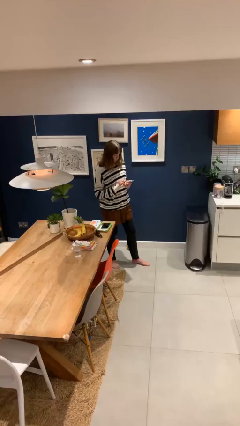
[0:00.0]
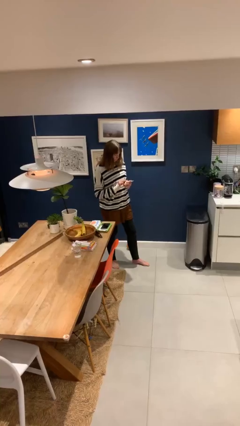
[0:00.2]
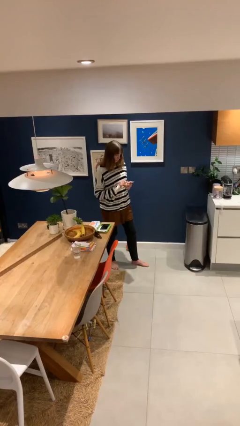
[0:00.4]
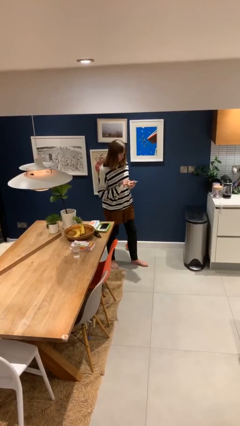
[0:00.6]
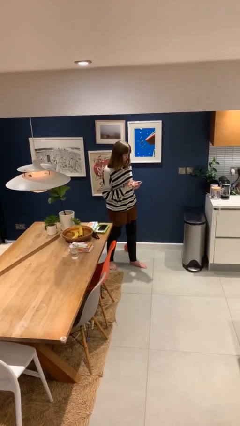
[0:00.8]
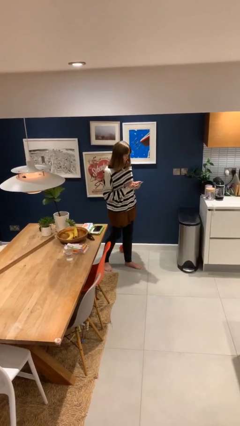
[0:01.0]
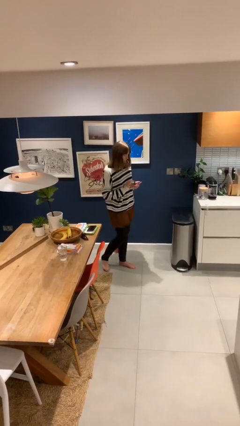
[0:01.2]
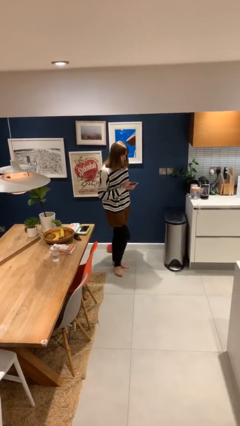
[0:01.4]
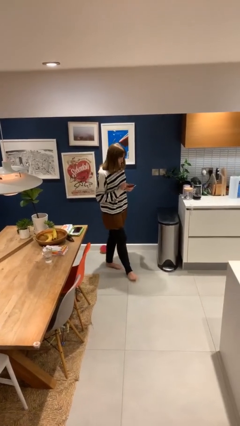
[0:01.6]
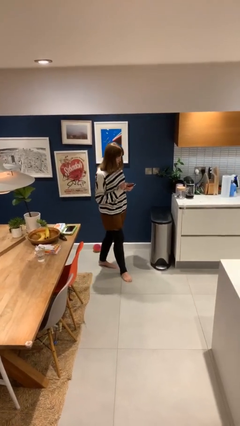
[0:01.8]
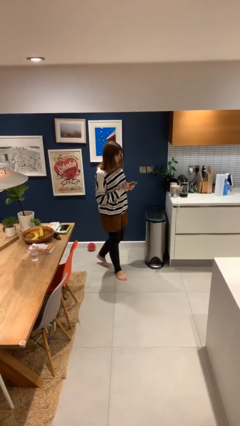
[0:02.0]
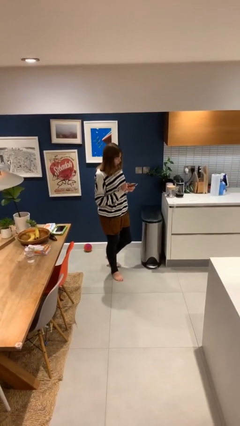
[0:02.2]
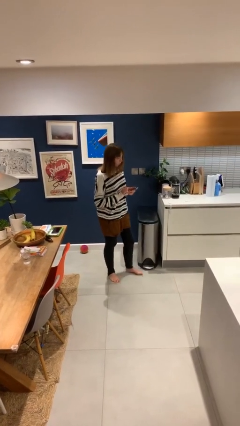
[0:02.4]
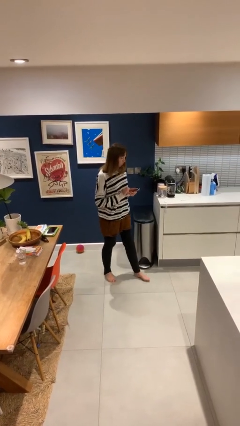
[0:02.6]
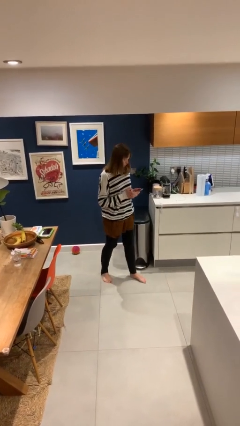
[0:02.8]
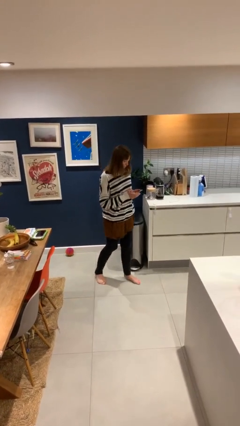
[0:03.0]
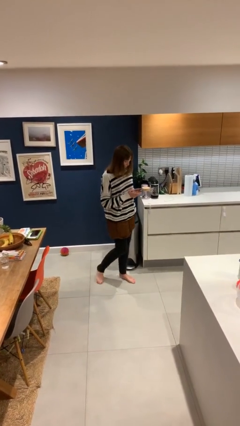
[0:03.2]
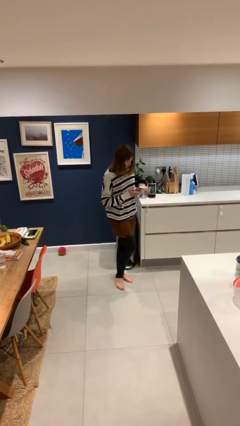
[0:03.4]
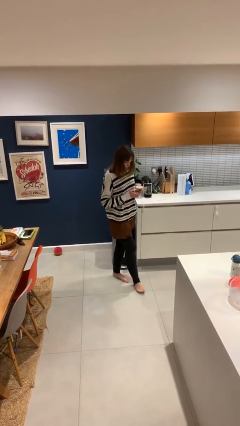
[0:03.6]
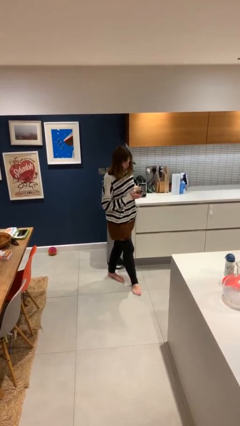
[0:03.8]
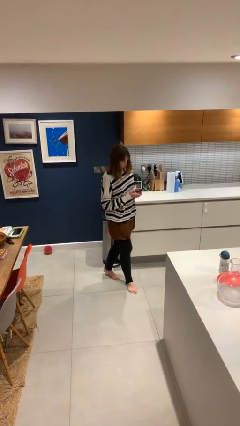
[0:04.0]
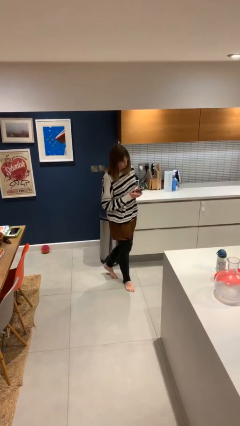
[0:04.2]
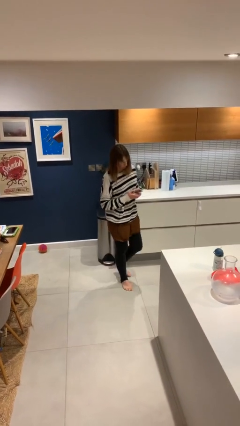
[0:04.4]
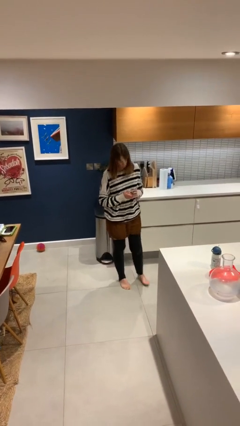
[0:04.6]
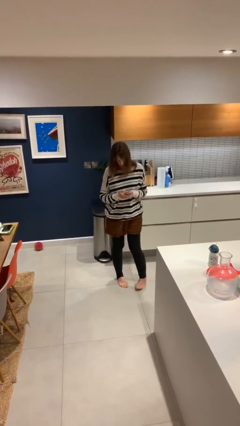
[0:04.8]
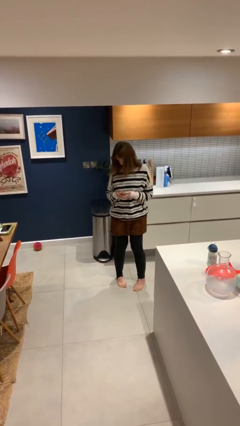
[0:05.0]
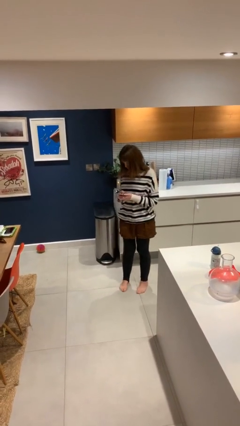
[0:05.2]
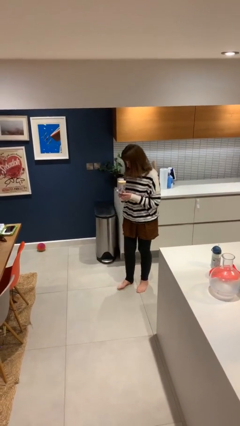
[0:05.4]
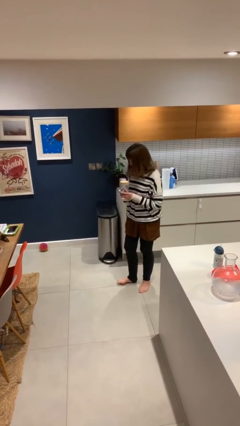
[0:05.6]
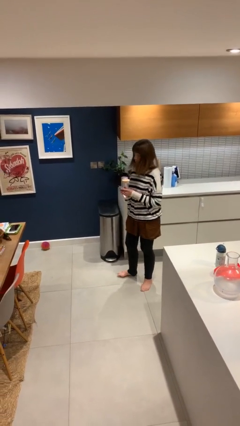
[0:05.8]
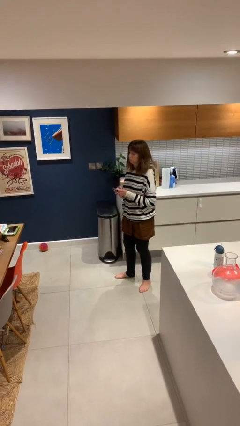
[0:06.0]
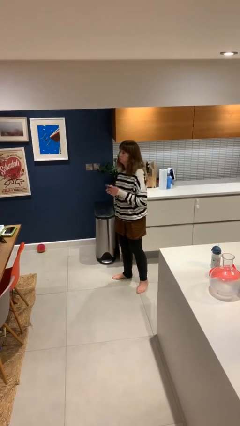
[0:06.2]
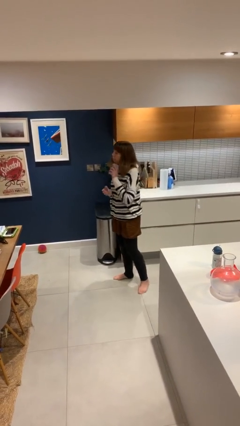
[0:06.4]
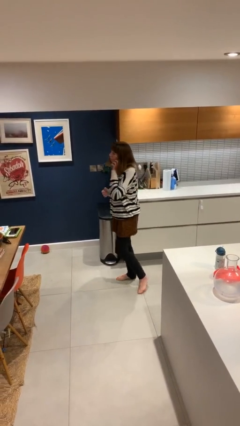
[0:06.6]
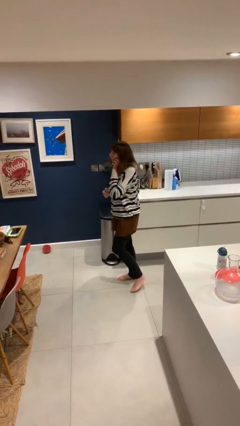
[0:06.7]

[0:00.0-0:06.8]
person texts on phone

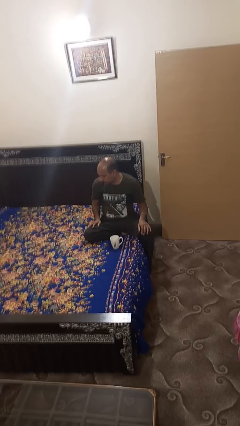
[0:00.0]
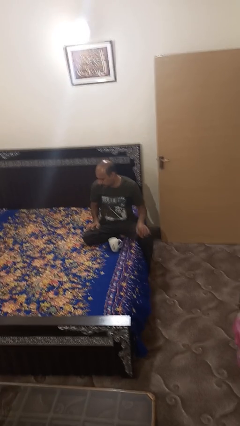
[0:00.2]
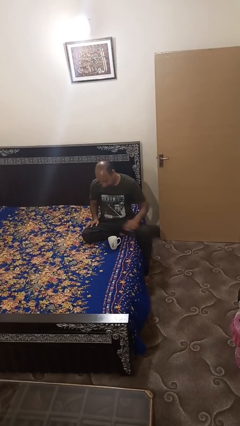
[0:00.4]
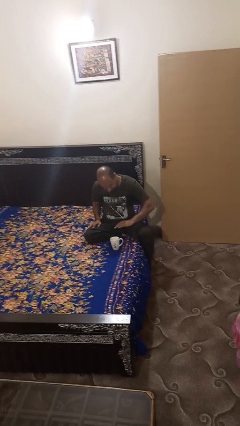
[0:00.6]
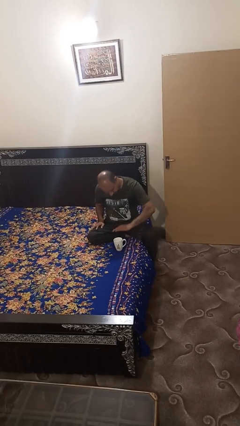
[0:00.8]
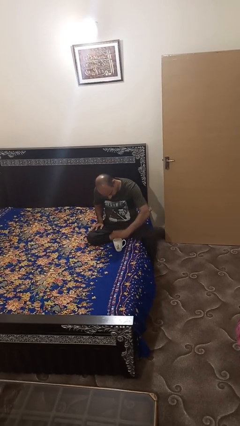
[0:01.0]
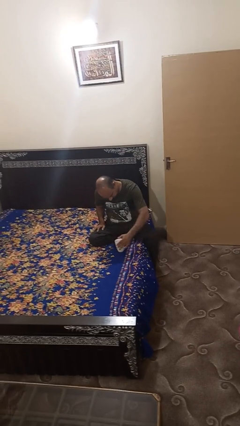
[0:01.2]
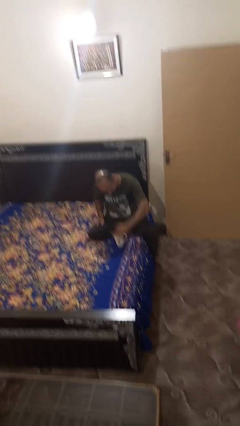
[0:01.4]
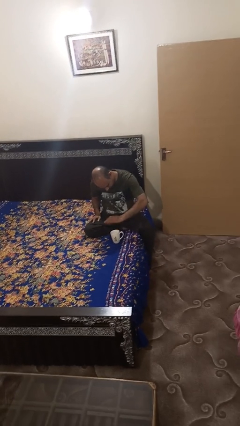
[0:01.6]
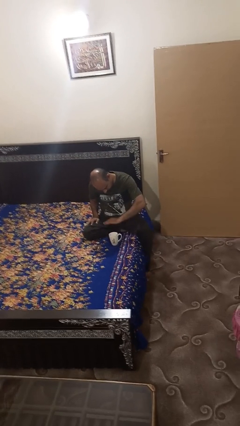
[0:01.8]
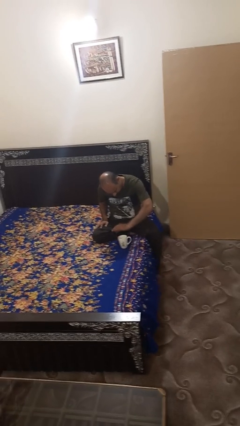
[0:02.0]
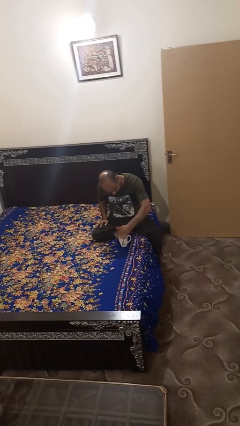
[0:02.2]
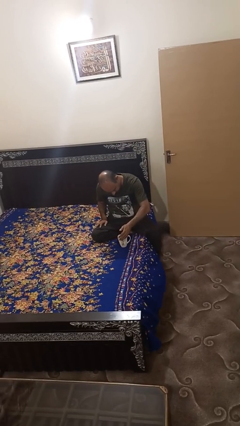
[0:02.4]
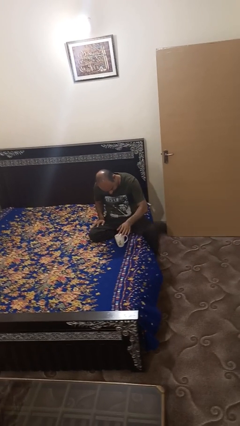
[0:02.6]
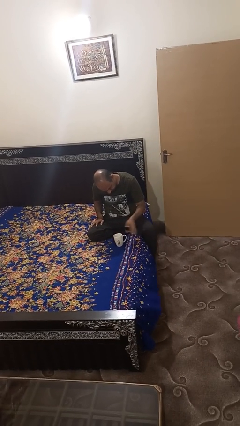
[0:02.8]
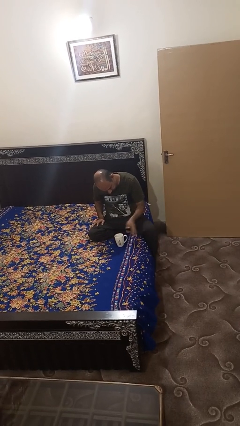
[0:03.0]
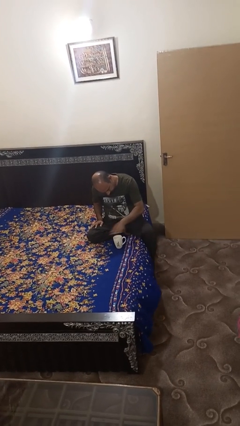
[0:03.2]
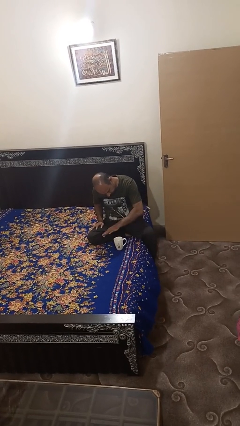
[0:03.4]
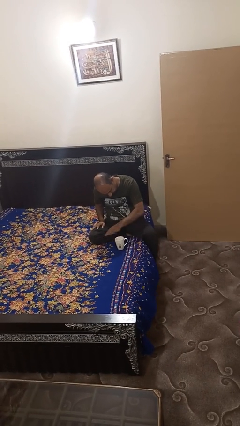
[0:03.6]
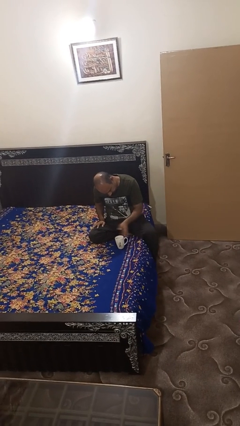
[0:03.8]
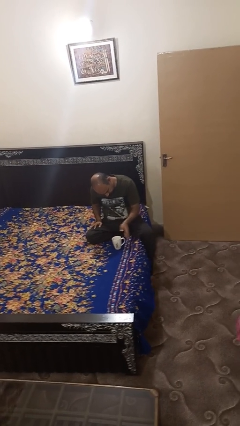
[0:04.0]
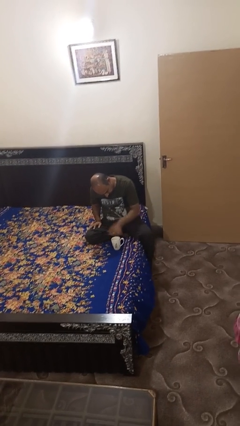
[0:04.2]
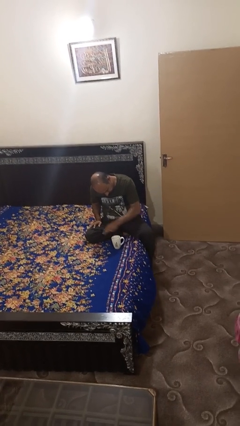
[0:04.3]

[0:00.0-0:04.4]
person waves hand over object

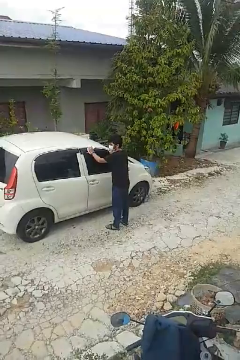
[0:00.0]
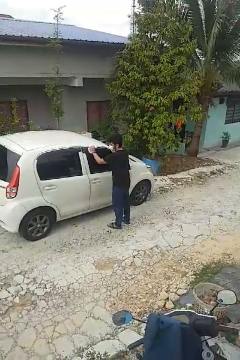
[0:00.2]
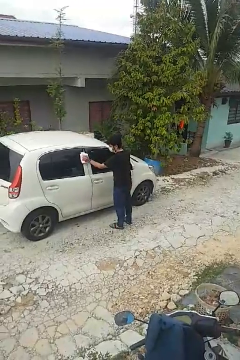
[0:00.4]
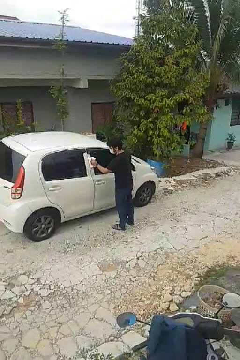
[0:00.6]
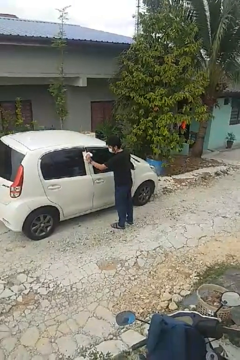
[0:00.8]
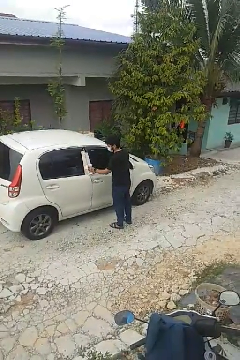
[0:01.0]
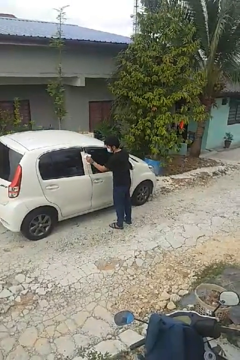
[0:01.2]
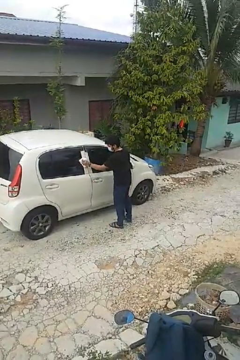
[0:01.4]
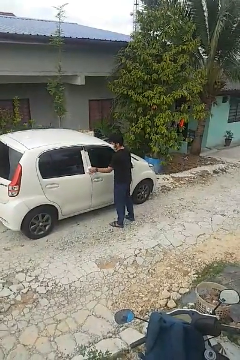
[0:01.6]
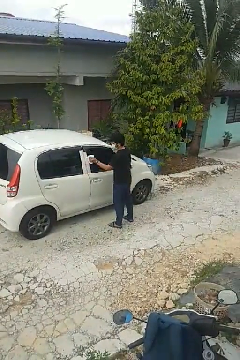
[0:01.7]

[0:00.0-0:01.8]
person polishes car with rag

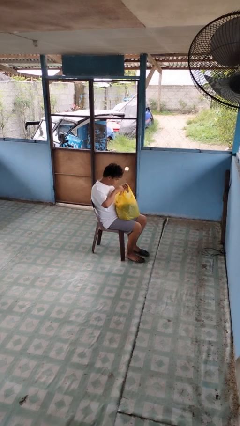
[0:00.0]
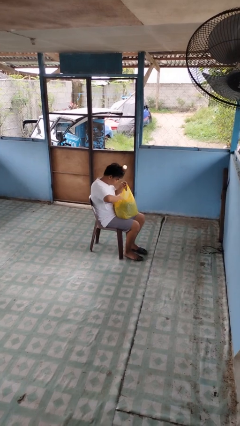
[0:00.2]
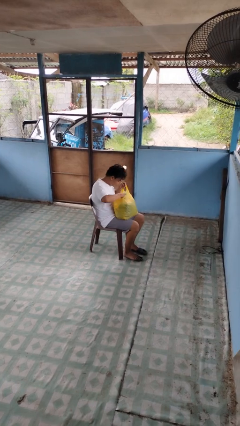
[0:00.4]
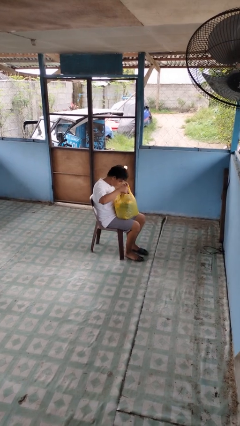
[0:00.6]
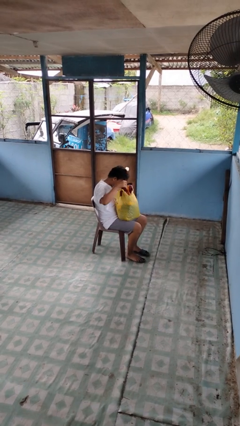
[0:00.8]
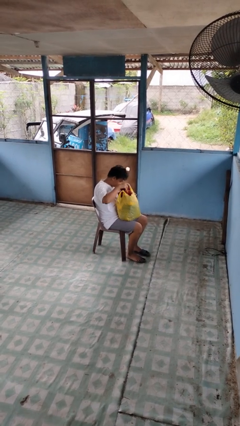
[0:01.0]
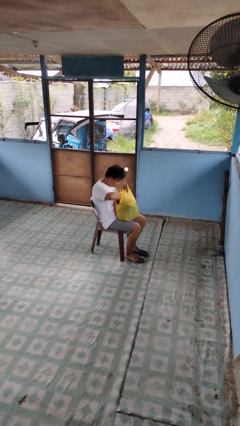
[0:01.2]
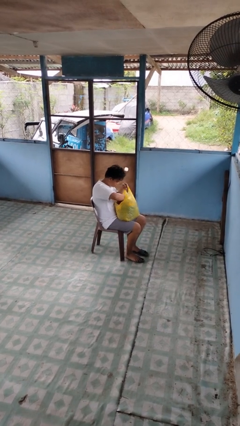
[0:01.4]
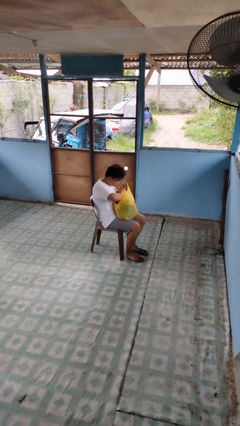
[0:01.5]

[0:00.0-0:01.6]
person searches in bag

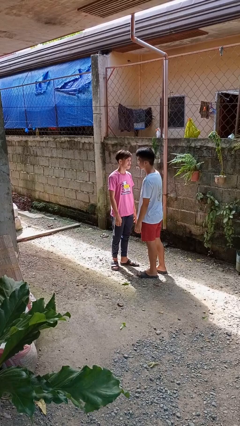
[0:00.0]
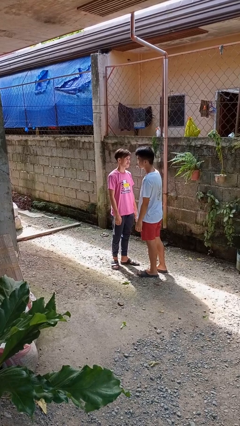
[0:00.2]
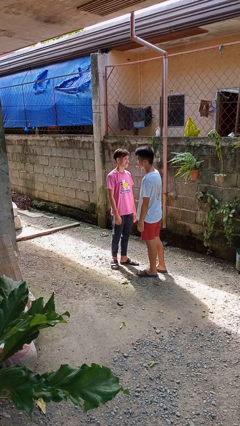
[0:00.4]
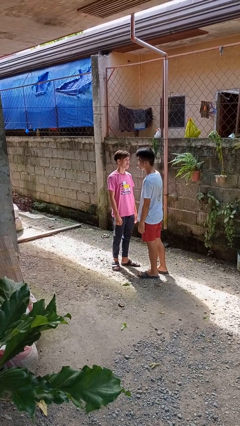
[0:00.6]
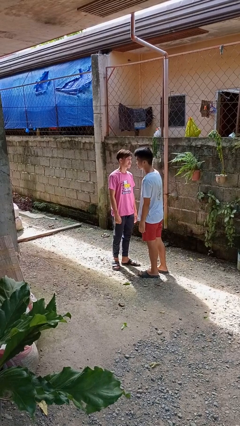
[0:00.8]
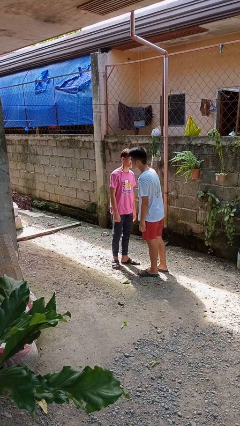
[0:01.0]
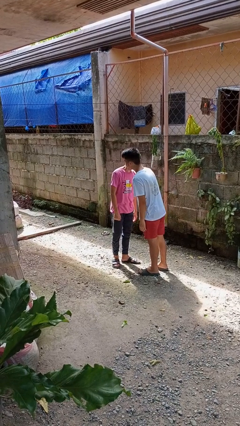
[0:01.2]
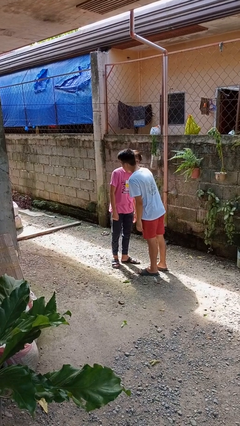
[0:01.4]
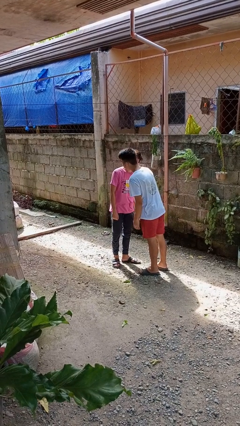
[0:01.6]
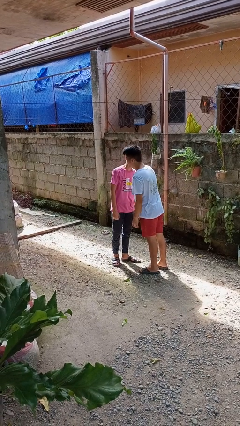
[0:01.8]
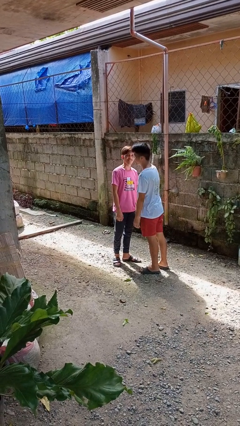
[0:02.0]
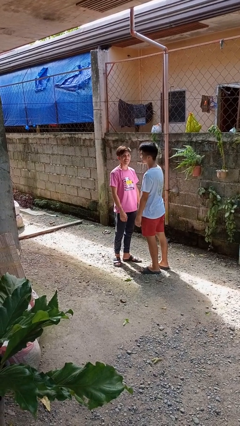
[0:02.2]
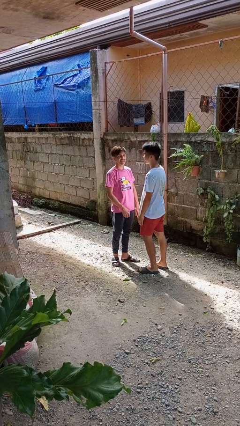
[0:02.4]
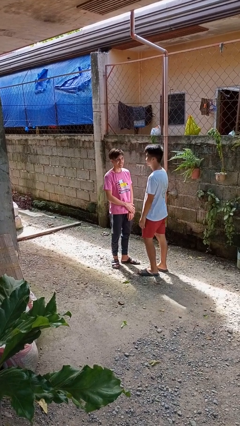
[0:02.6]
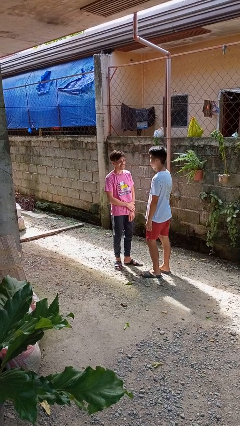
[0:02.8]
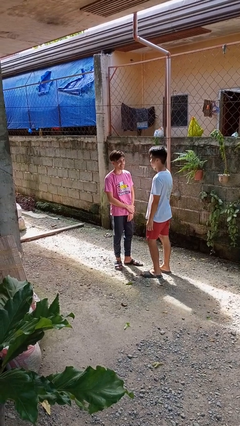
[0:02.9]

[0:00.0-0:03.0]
person kisses cheek of person
